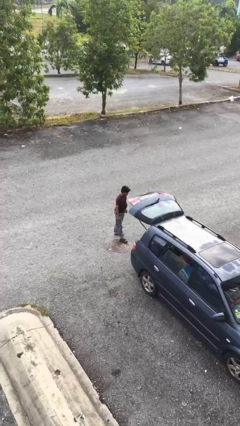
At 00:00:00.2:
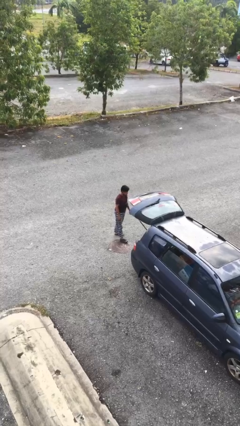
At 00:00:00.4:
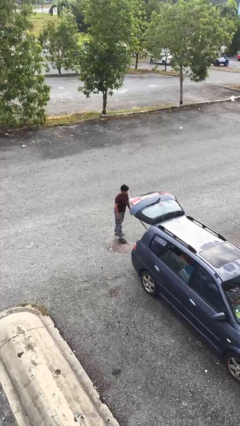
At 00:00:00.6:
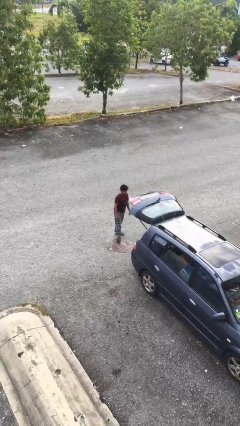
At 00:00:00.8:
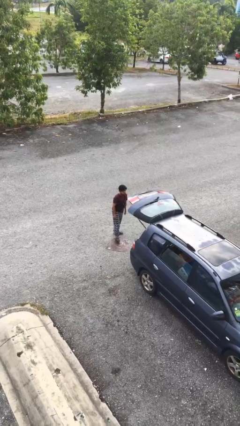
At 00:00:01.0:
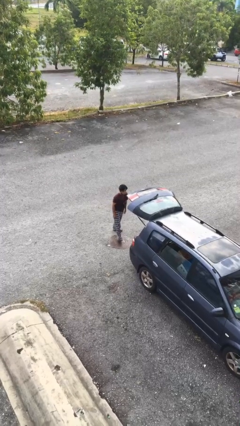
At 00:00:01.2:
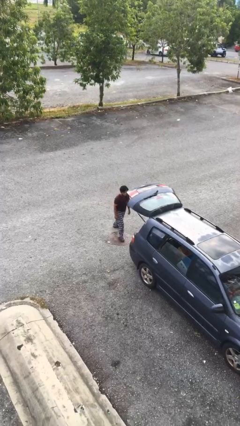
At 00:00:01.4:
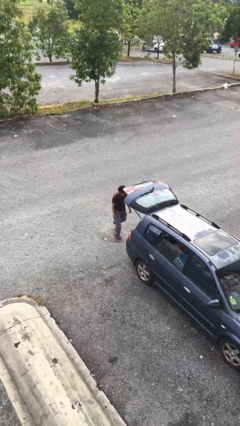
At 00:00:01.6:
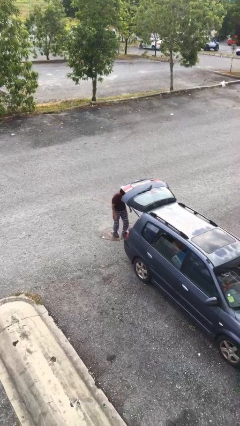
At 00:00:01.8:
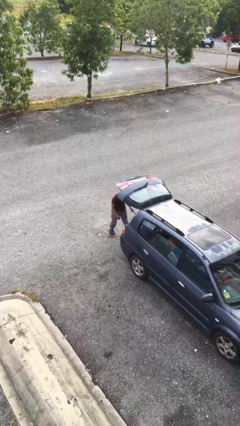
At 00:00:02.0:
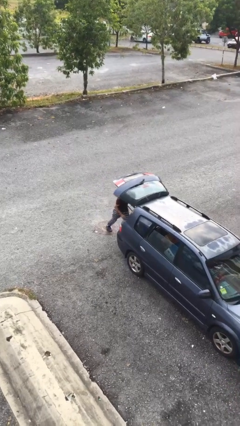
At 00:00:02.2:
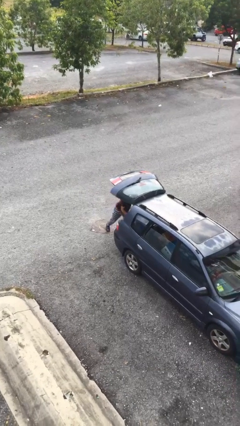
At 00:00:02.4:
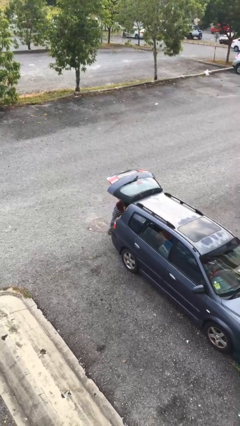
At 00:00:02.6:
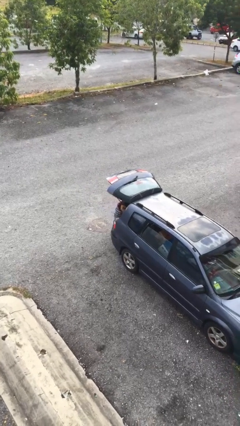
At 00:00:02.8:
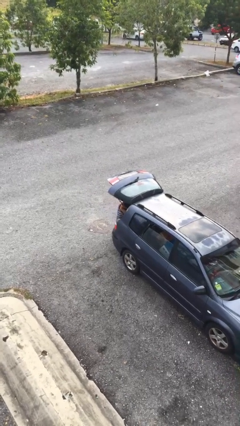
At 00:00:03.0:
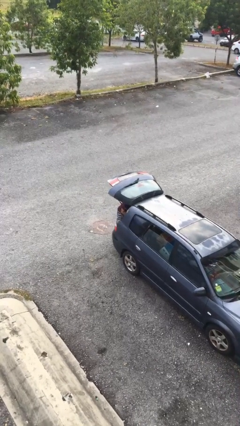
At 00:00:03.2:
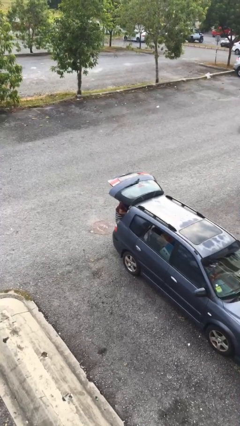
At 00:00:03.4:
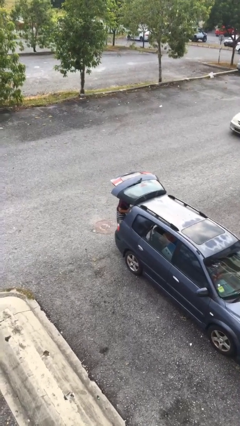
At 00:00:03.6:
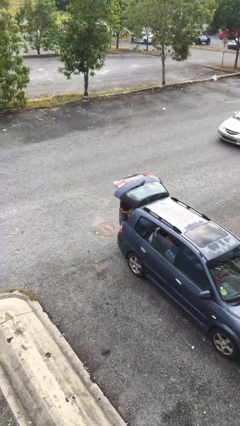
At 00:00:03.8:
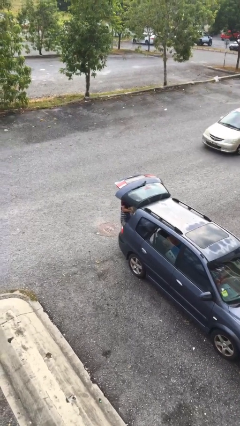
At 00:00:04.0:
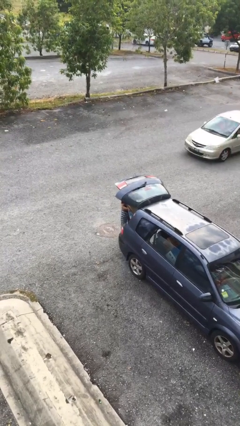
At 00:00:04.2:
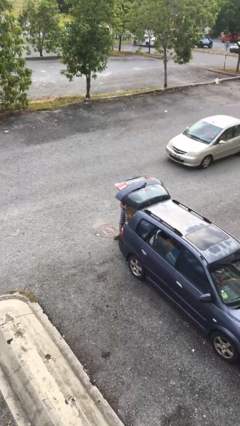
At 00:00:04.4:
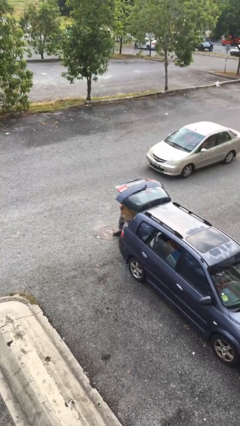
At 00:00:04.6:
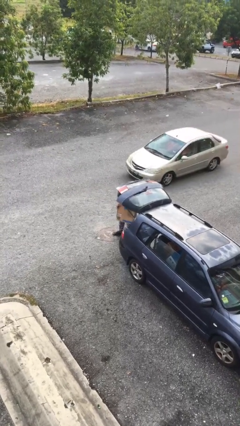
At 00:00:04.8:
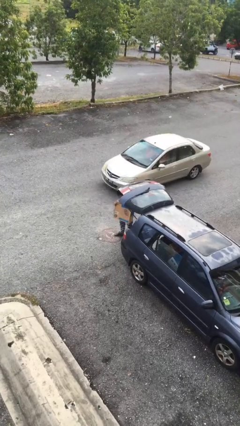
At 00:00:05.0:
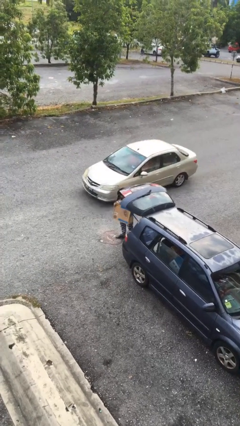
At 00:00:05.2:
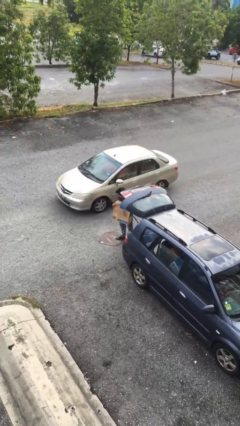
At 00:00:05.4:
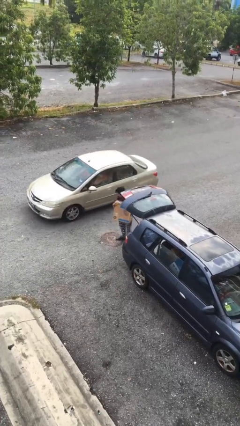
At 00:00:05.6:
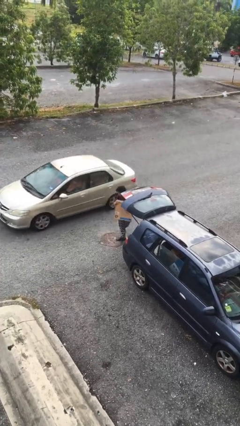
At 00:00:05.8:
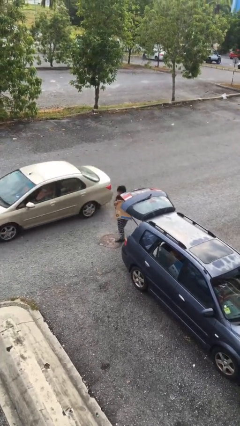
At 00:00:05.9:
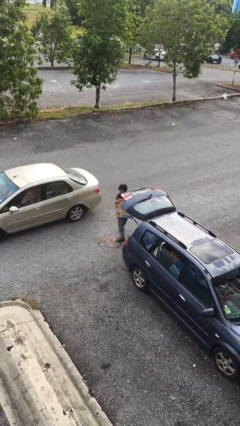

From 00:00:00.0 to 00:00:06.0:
person unloads car

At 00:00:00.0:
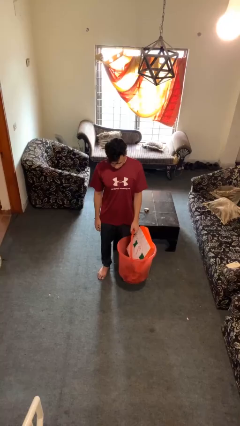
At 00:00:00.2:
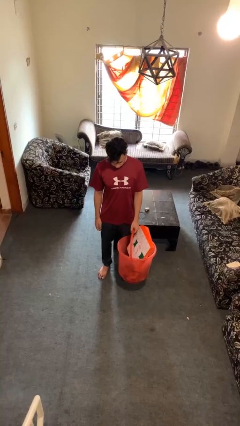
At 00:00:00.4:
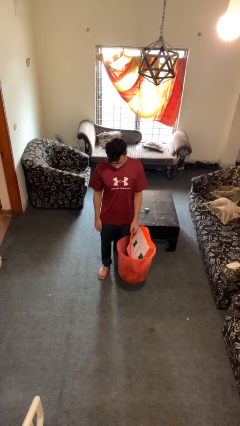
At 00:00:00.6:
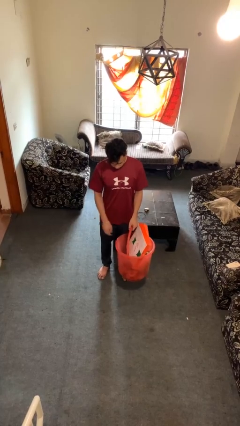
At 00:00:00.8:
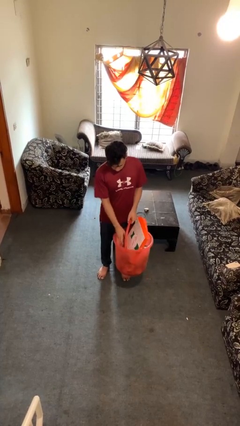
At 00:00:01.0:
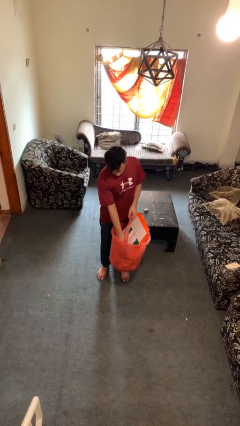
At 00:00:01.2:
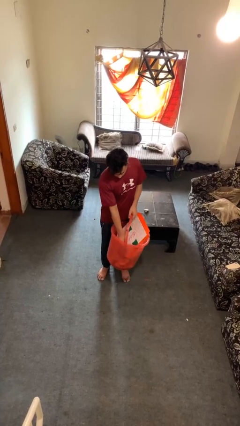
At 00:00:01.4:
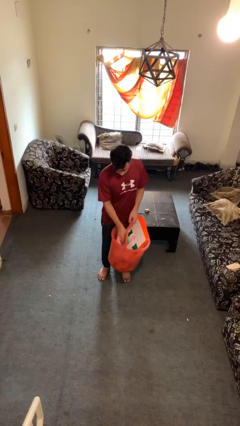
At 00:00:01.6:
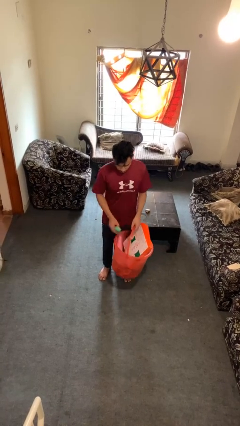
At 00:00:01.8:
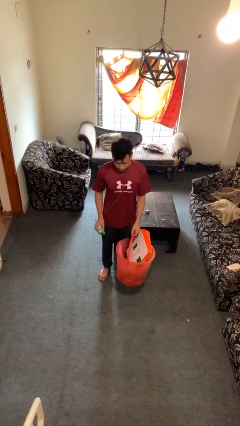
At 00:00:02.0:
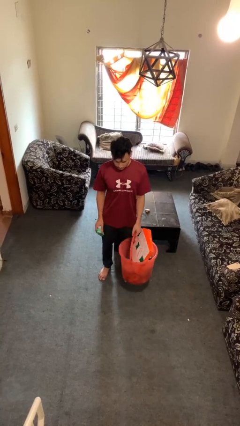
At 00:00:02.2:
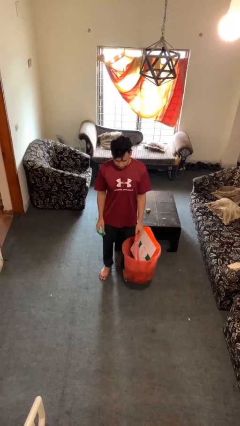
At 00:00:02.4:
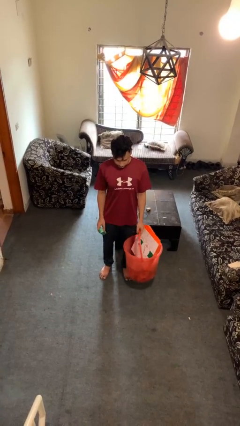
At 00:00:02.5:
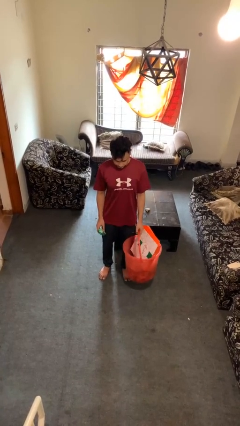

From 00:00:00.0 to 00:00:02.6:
person takes object from basket

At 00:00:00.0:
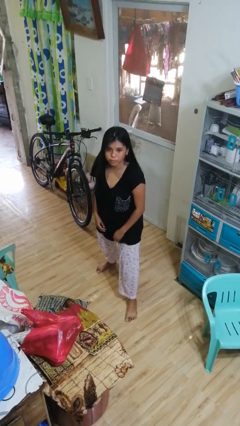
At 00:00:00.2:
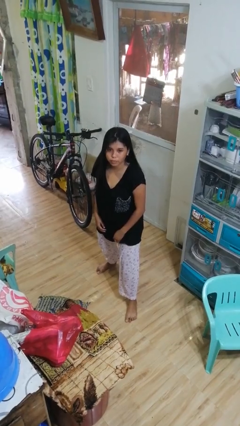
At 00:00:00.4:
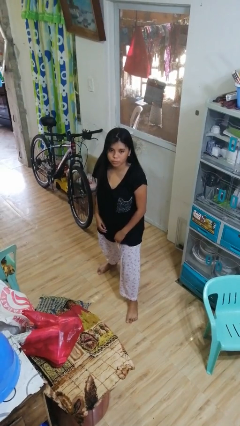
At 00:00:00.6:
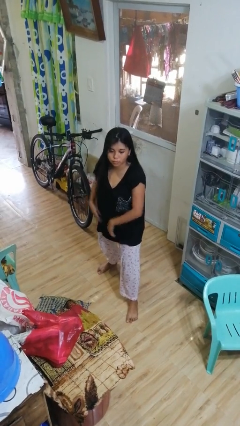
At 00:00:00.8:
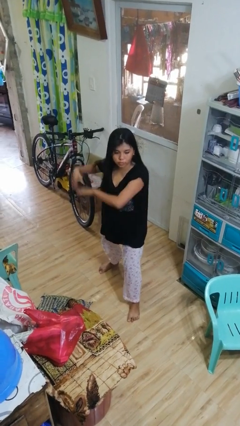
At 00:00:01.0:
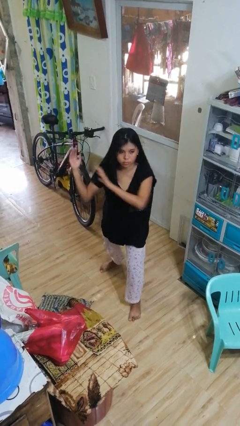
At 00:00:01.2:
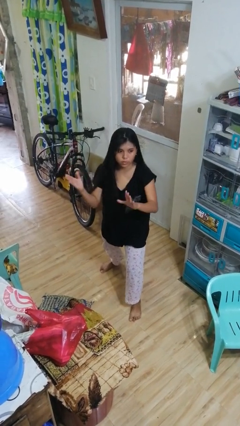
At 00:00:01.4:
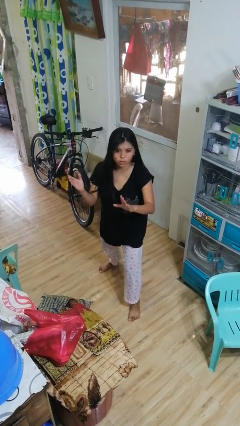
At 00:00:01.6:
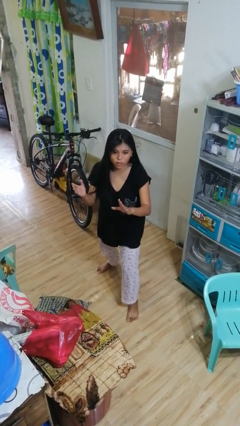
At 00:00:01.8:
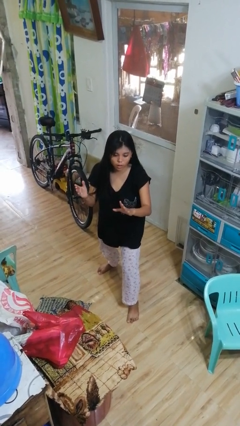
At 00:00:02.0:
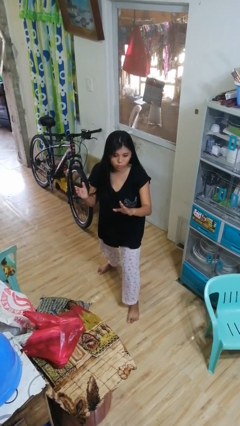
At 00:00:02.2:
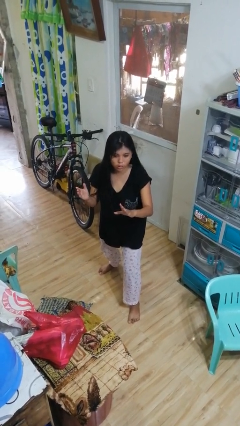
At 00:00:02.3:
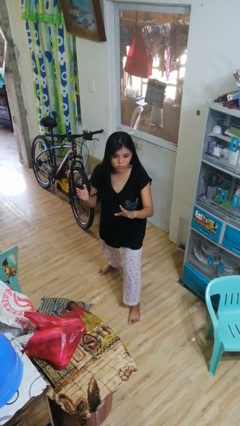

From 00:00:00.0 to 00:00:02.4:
person karate chop

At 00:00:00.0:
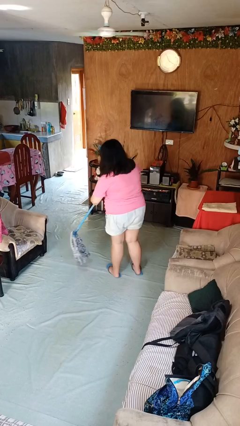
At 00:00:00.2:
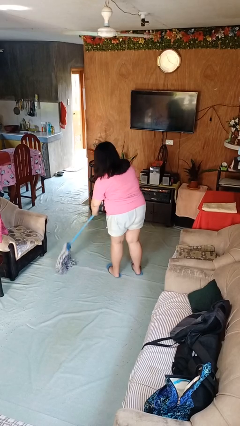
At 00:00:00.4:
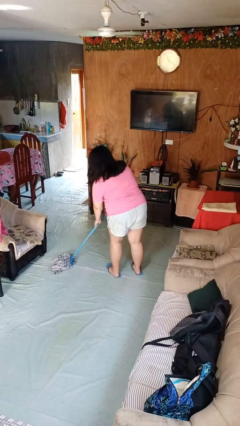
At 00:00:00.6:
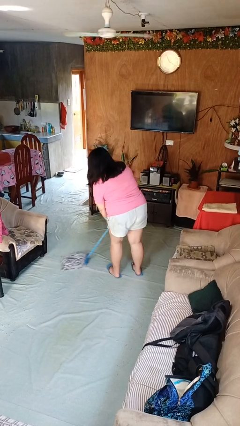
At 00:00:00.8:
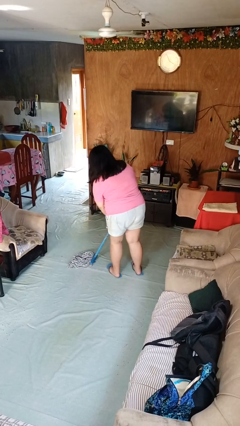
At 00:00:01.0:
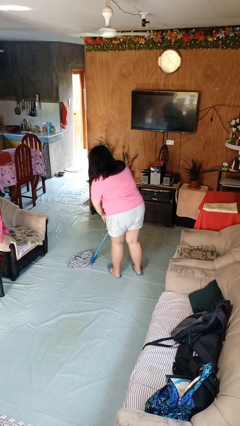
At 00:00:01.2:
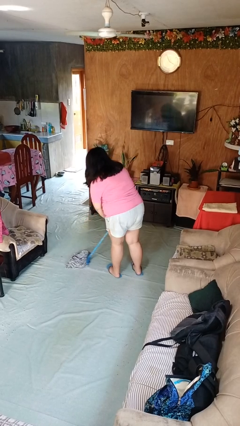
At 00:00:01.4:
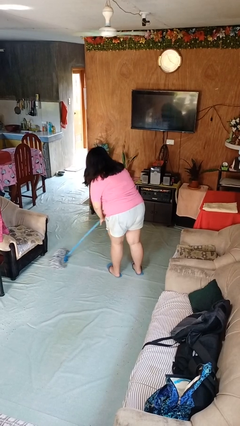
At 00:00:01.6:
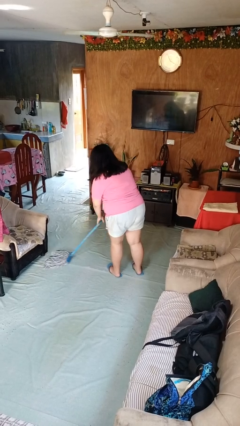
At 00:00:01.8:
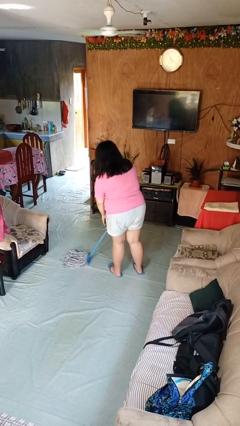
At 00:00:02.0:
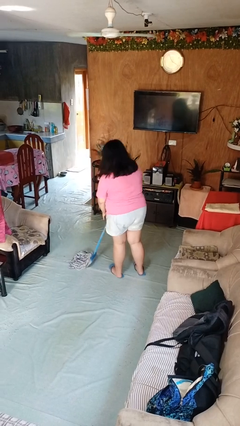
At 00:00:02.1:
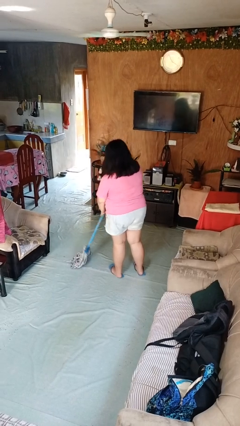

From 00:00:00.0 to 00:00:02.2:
person mops

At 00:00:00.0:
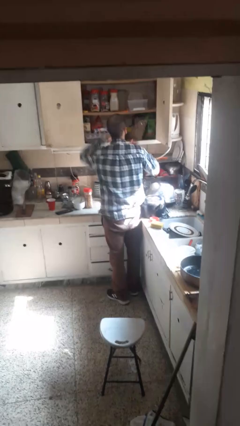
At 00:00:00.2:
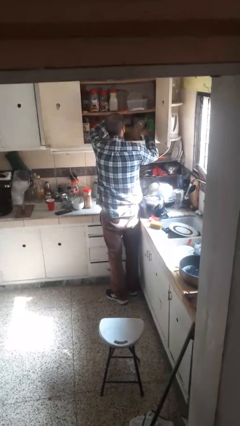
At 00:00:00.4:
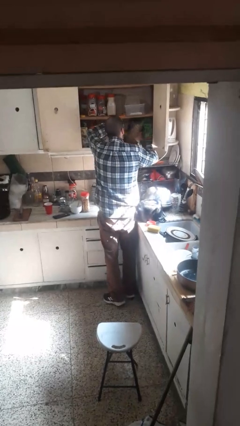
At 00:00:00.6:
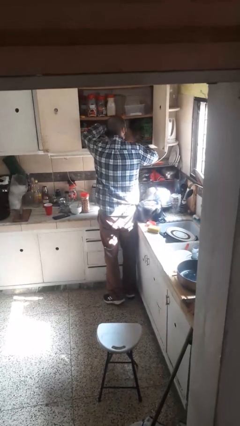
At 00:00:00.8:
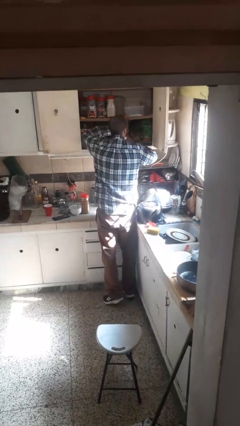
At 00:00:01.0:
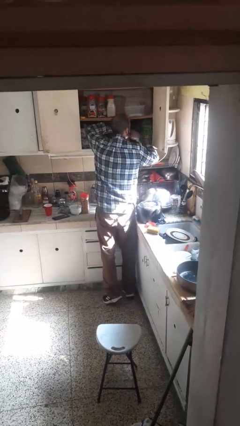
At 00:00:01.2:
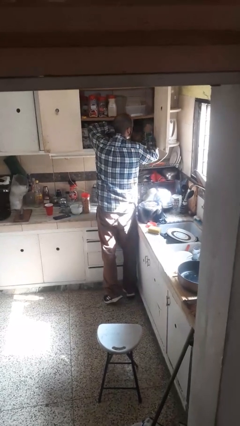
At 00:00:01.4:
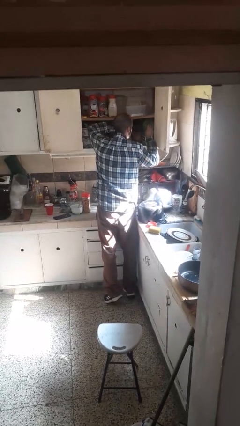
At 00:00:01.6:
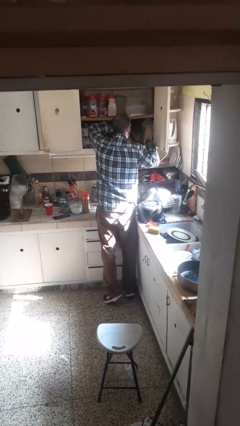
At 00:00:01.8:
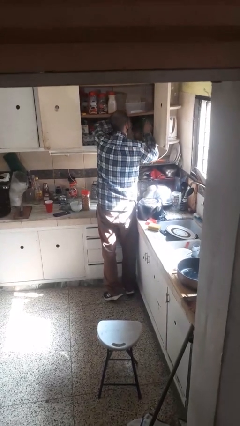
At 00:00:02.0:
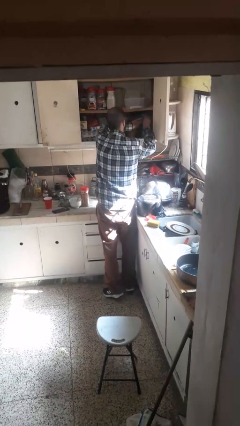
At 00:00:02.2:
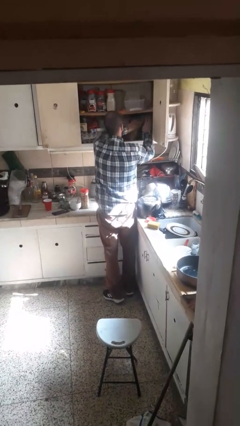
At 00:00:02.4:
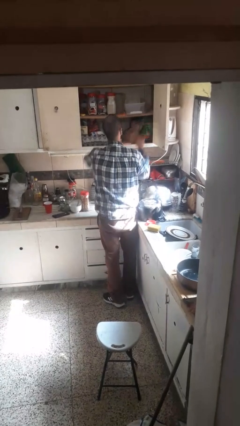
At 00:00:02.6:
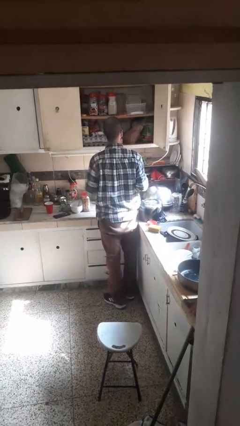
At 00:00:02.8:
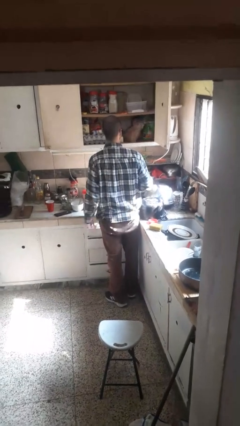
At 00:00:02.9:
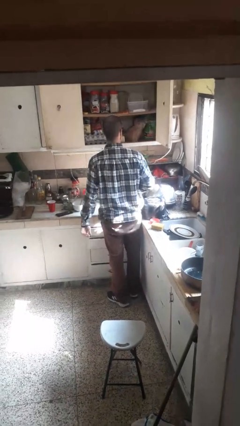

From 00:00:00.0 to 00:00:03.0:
person searches in cabinet

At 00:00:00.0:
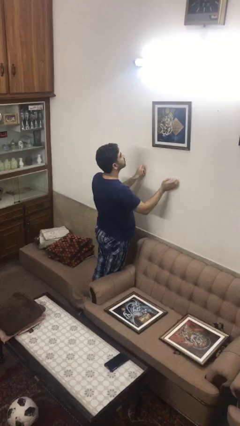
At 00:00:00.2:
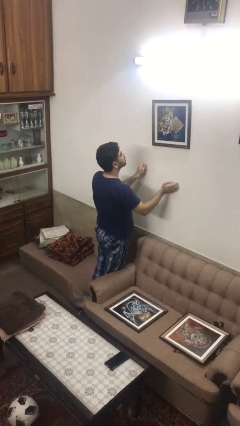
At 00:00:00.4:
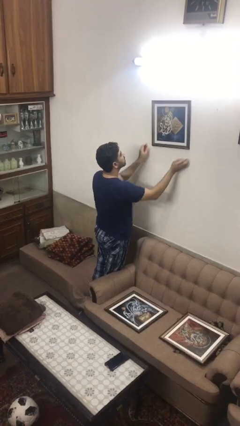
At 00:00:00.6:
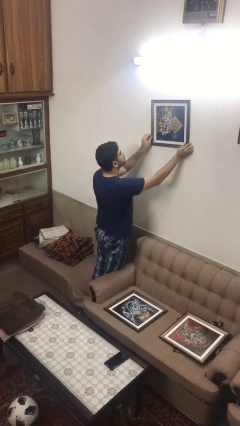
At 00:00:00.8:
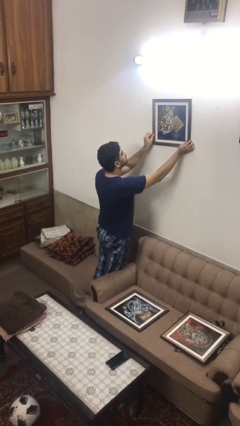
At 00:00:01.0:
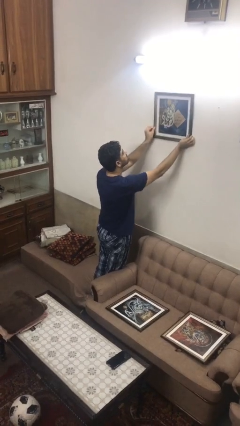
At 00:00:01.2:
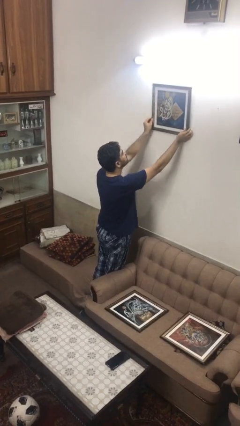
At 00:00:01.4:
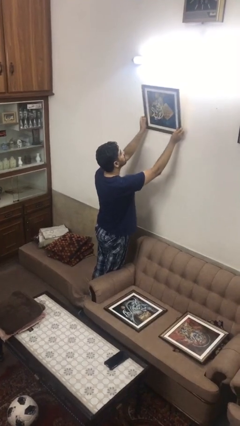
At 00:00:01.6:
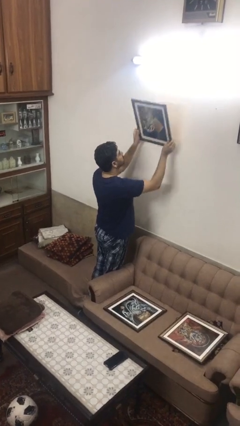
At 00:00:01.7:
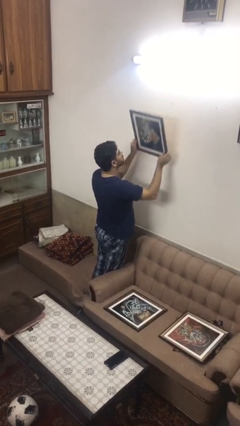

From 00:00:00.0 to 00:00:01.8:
person takes down picture frame
